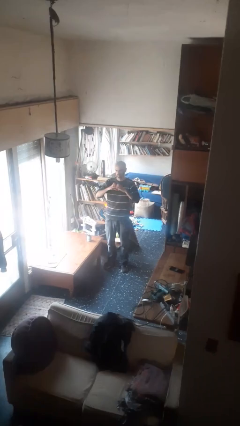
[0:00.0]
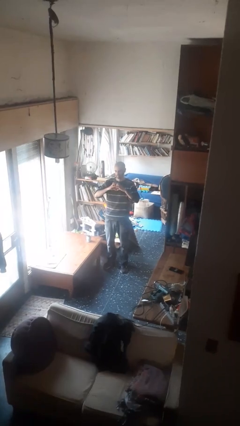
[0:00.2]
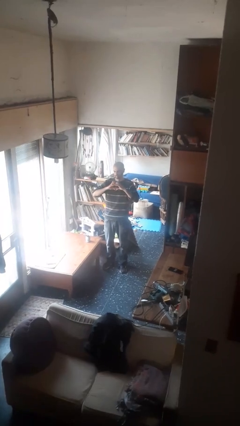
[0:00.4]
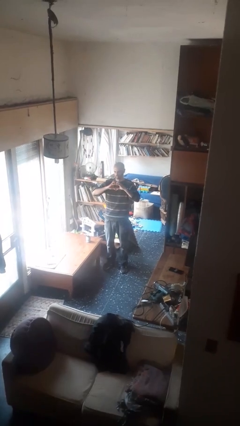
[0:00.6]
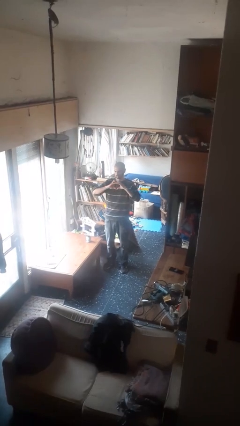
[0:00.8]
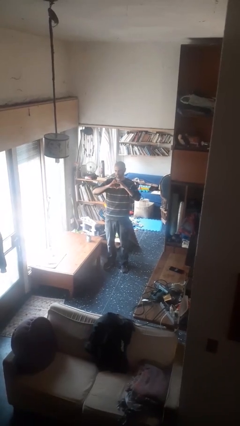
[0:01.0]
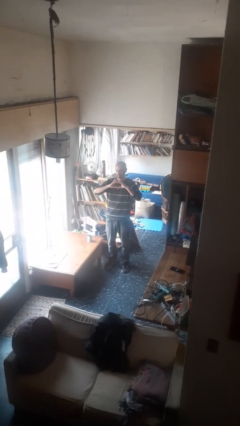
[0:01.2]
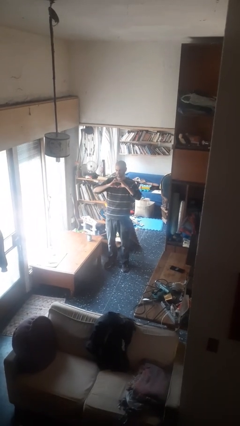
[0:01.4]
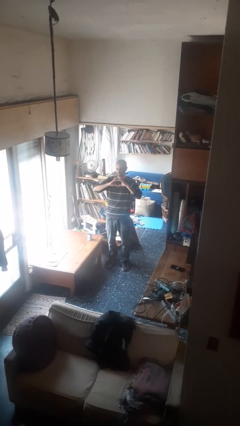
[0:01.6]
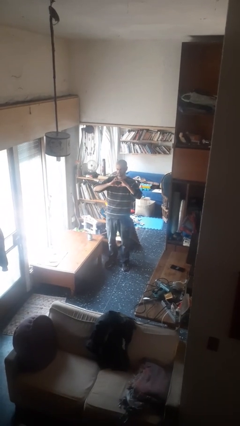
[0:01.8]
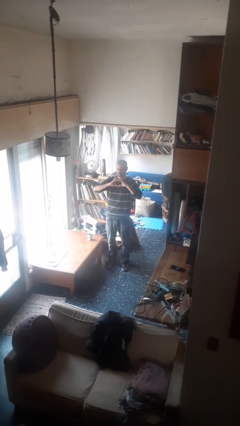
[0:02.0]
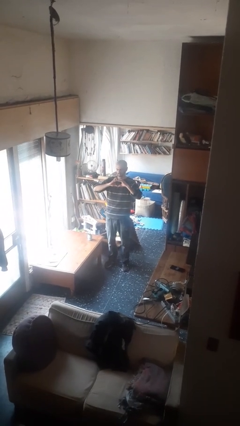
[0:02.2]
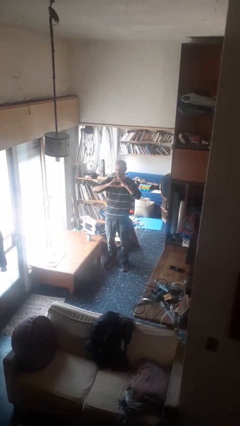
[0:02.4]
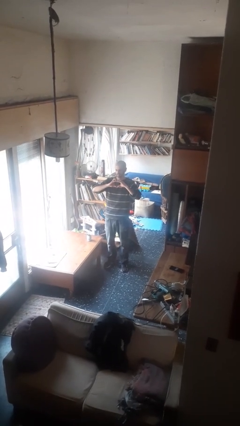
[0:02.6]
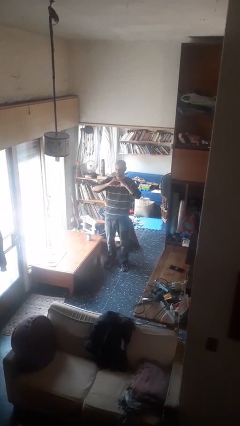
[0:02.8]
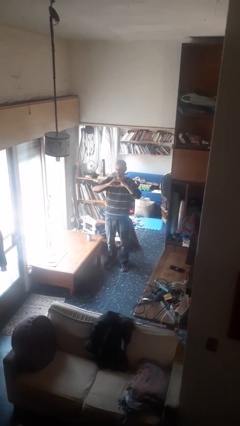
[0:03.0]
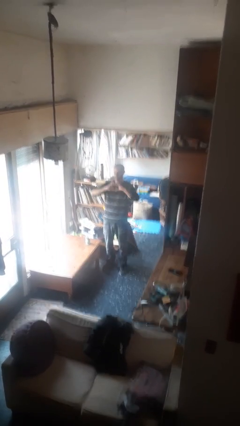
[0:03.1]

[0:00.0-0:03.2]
person gestures heart

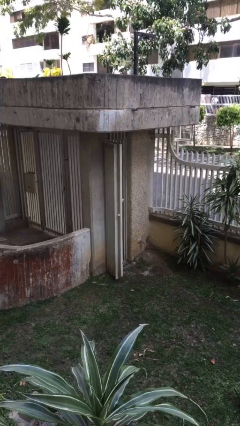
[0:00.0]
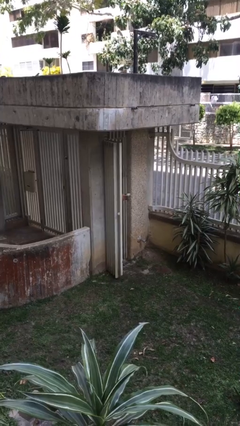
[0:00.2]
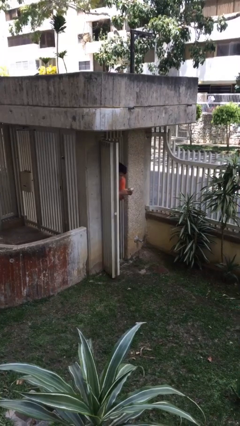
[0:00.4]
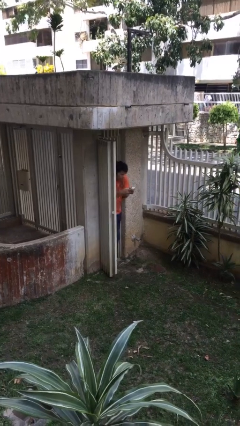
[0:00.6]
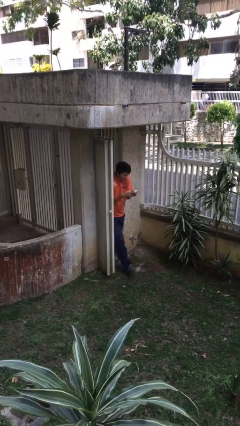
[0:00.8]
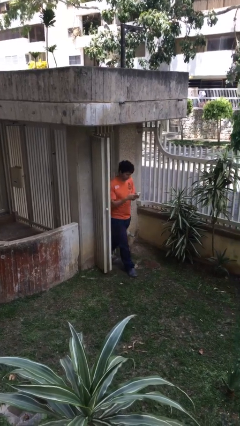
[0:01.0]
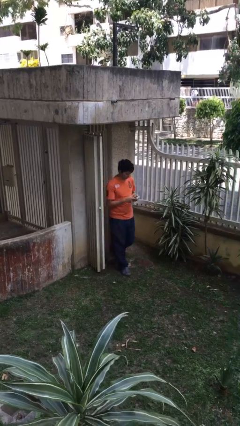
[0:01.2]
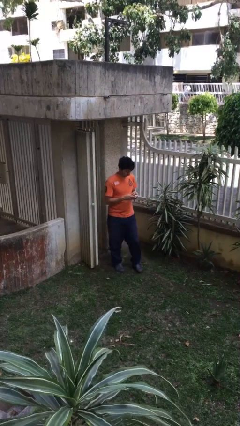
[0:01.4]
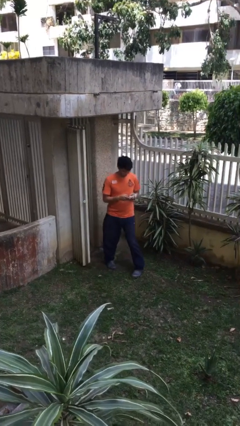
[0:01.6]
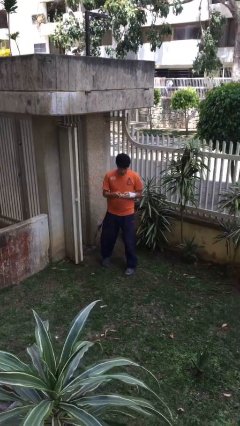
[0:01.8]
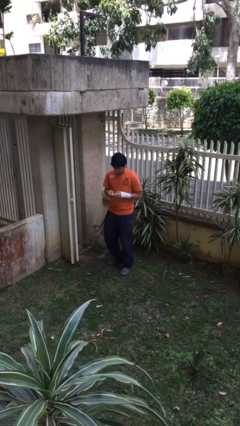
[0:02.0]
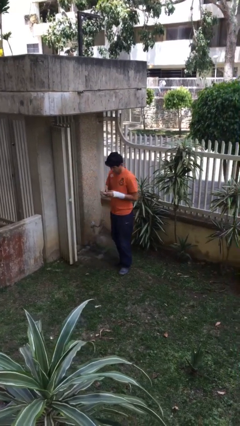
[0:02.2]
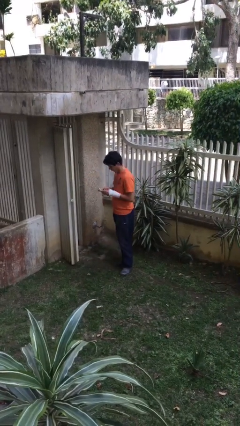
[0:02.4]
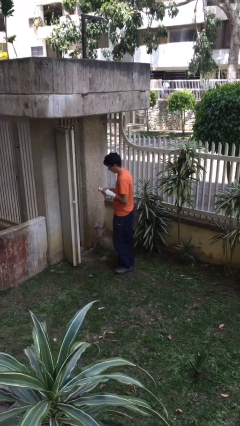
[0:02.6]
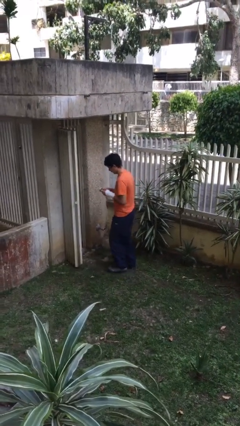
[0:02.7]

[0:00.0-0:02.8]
person enters scene through structure

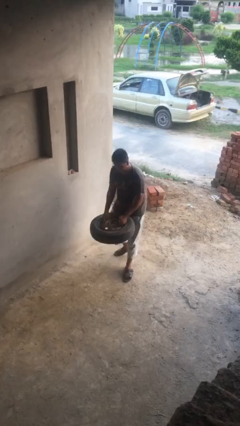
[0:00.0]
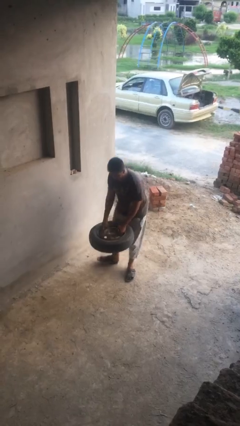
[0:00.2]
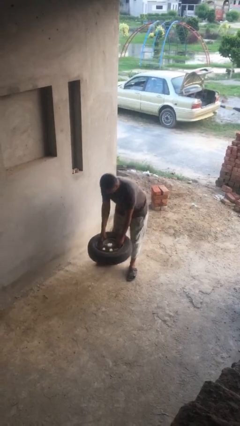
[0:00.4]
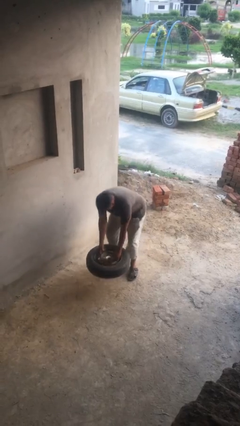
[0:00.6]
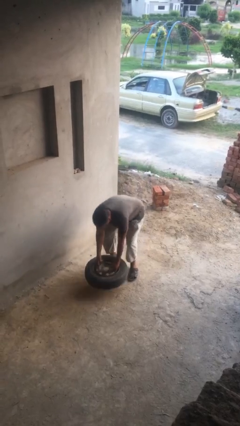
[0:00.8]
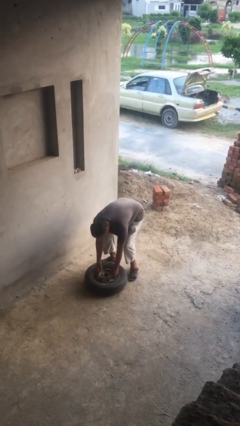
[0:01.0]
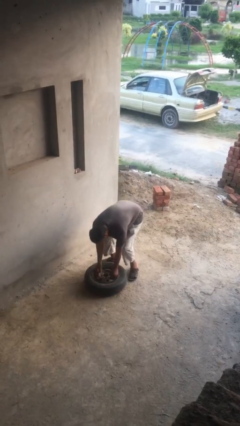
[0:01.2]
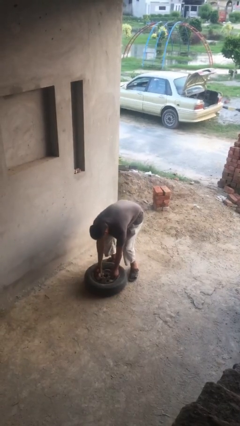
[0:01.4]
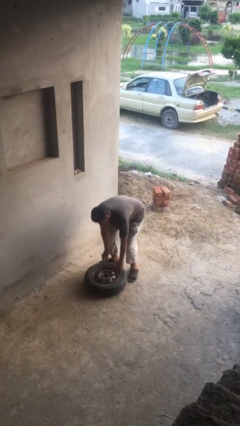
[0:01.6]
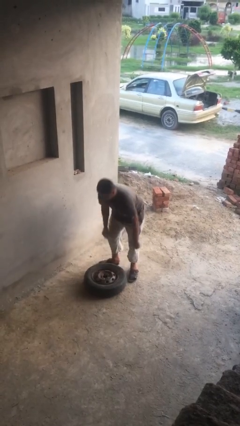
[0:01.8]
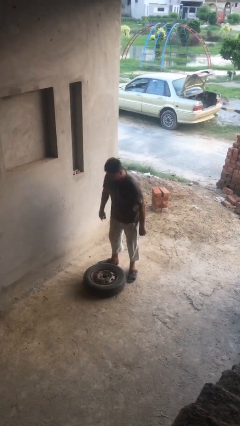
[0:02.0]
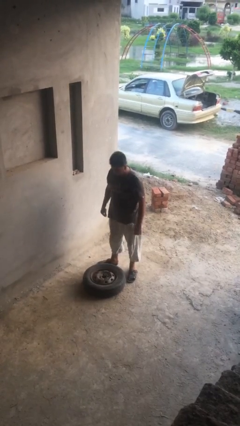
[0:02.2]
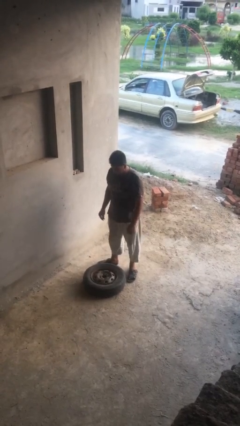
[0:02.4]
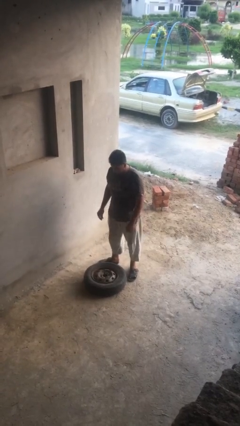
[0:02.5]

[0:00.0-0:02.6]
person puts down object on floor

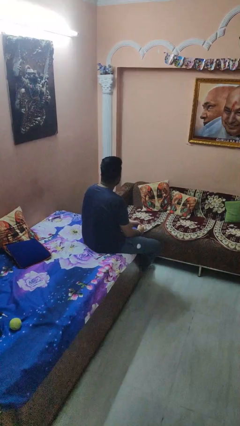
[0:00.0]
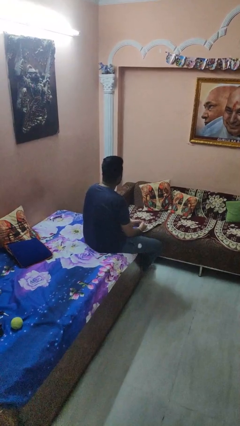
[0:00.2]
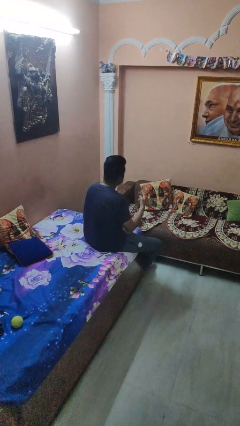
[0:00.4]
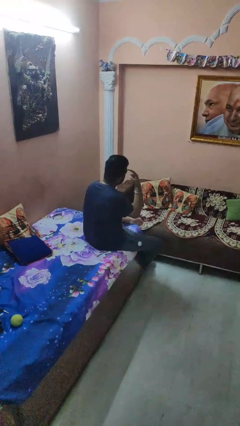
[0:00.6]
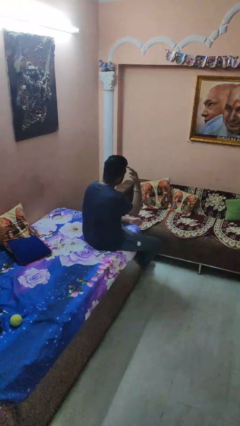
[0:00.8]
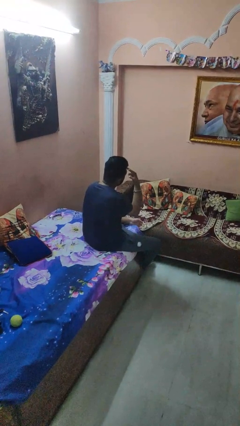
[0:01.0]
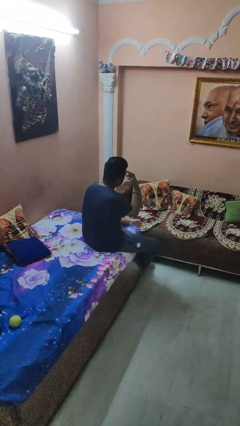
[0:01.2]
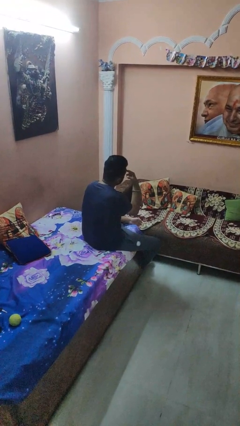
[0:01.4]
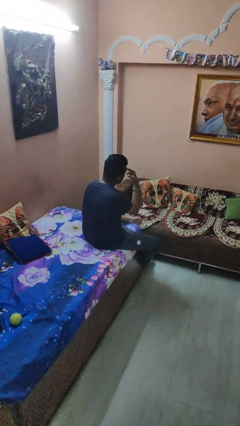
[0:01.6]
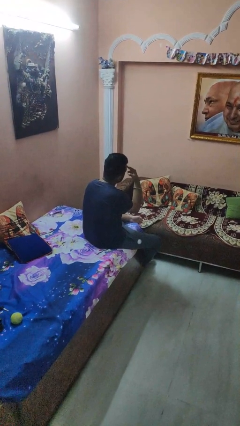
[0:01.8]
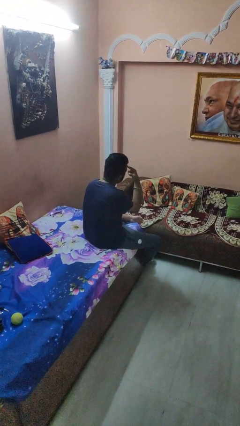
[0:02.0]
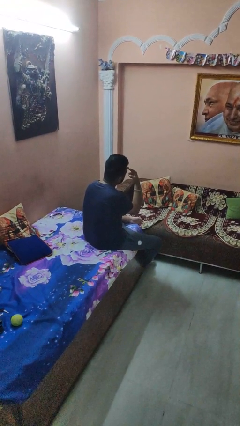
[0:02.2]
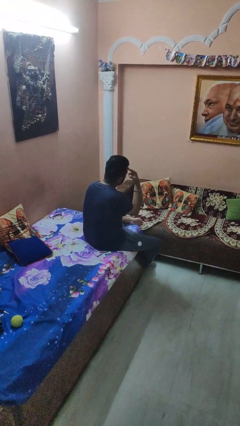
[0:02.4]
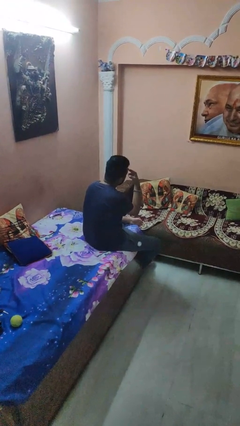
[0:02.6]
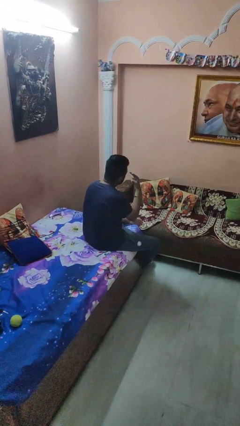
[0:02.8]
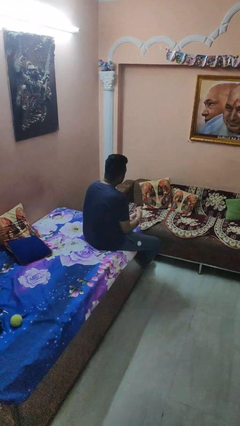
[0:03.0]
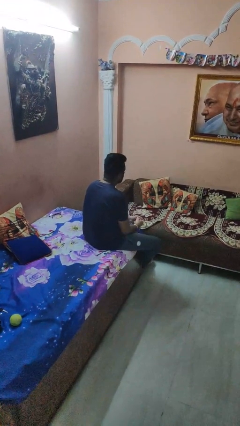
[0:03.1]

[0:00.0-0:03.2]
person gestures watch closely

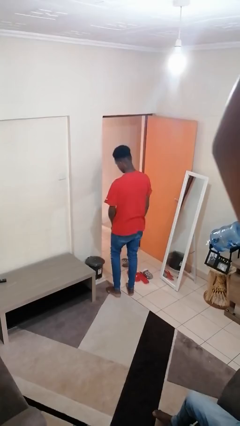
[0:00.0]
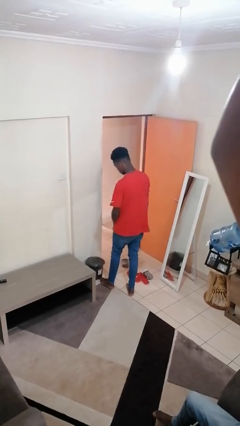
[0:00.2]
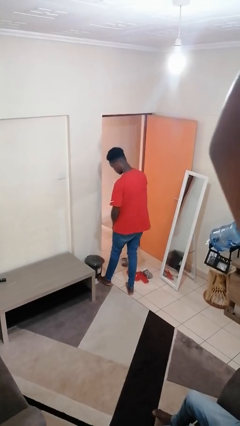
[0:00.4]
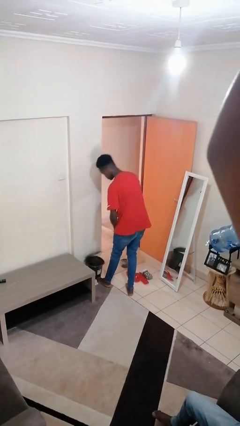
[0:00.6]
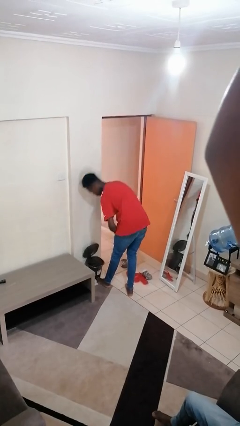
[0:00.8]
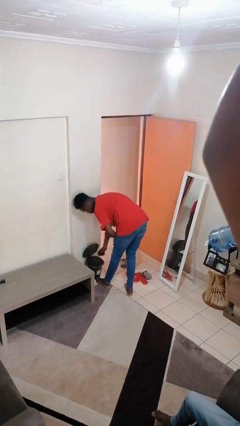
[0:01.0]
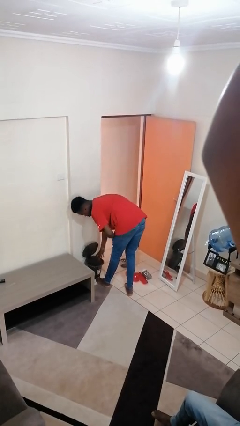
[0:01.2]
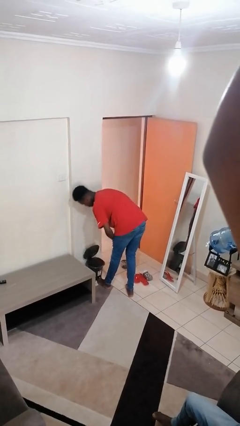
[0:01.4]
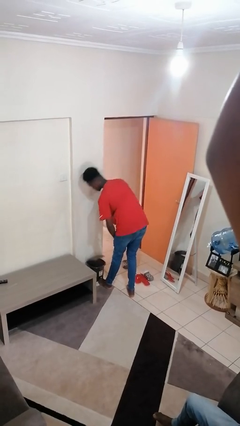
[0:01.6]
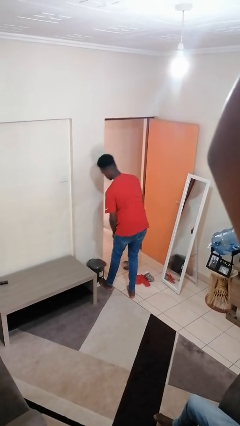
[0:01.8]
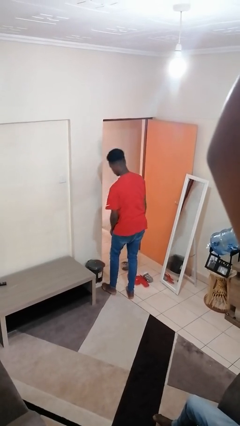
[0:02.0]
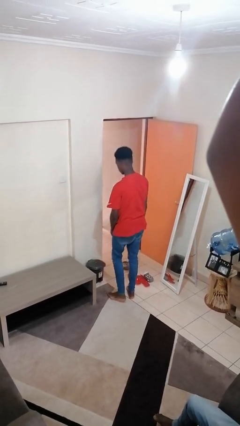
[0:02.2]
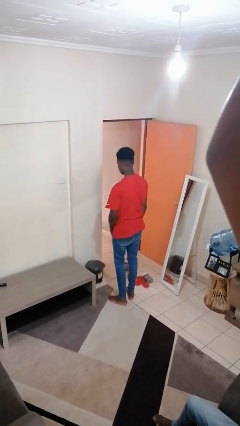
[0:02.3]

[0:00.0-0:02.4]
person discards trash

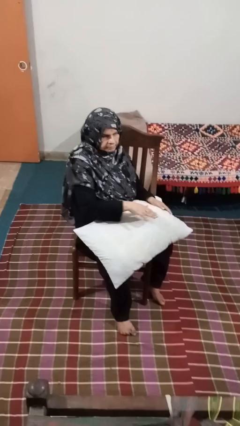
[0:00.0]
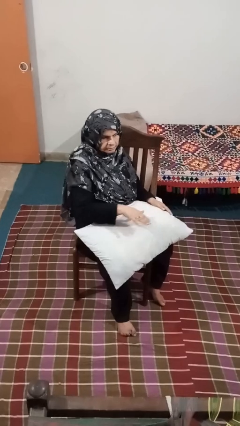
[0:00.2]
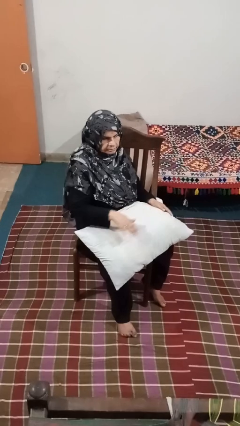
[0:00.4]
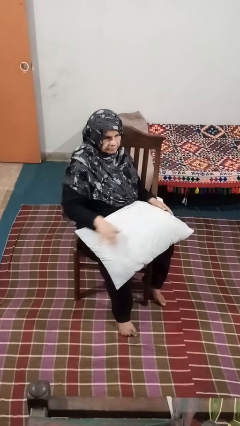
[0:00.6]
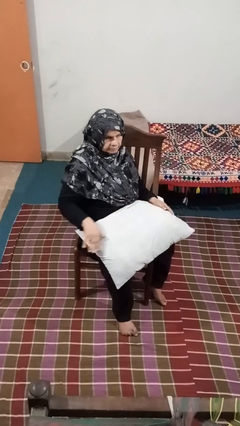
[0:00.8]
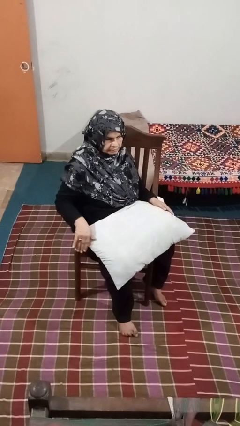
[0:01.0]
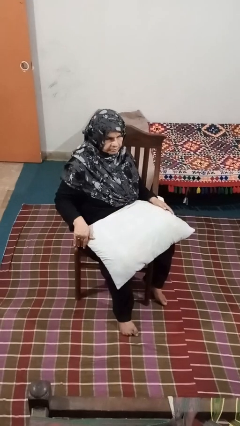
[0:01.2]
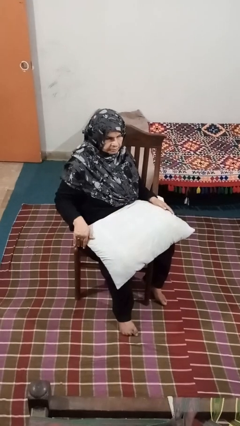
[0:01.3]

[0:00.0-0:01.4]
person waves hand over object

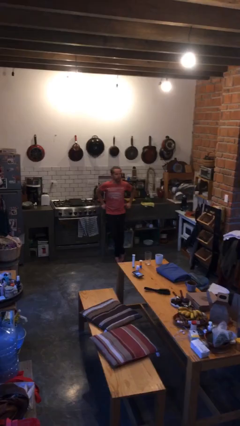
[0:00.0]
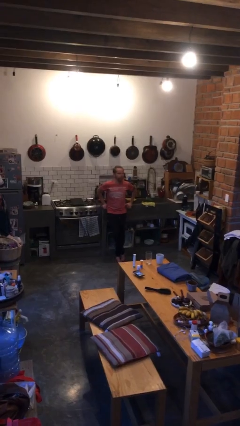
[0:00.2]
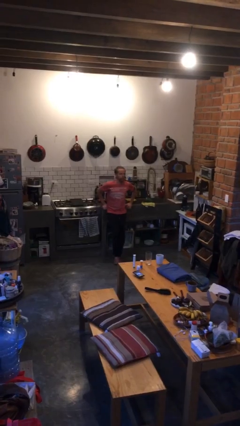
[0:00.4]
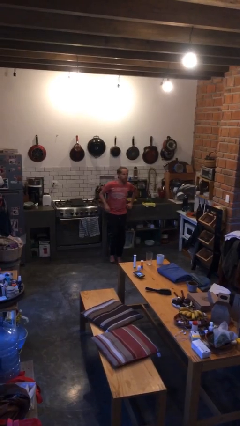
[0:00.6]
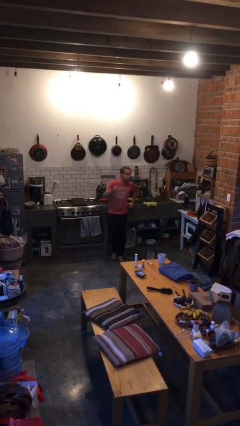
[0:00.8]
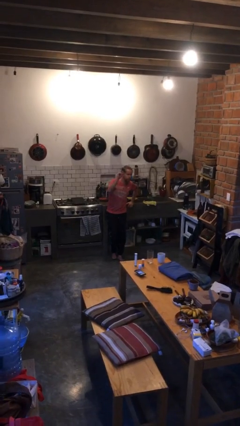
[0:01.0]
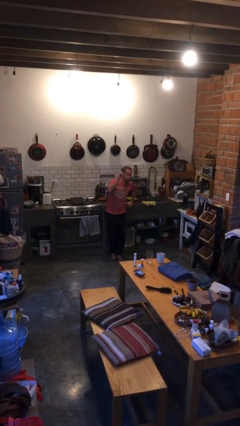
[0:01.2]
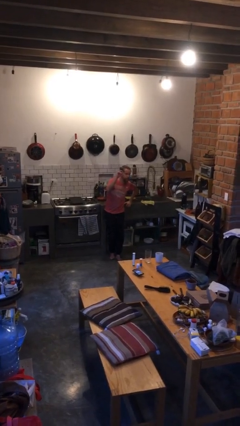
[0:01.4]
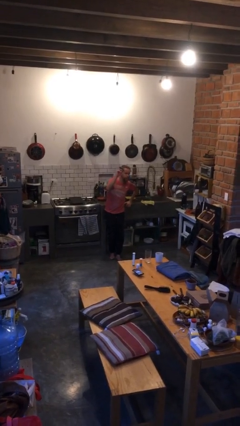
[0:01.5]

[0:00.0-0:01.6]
person gestures raise hand
